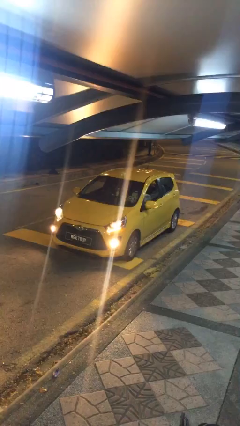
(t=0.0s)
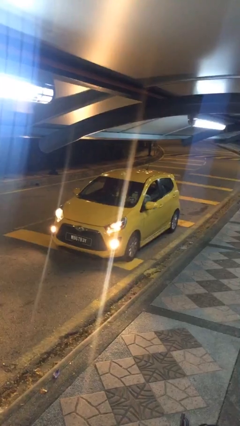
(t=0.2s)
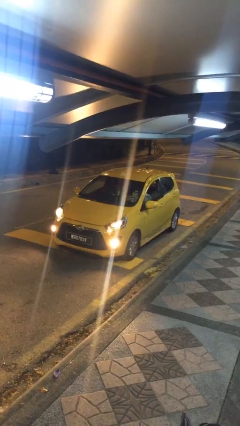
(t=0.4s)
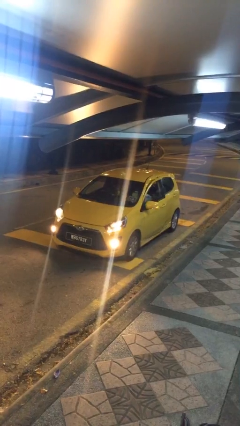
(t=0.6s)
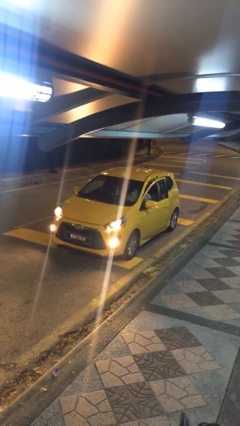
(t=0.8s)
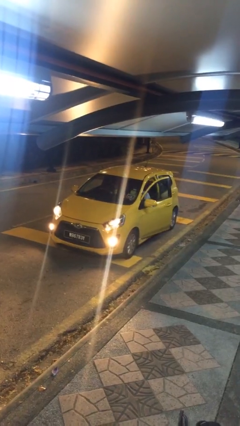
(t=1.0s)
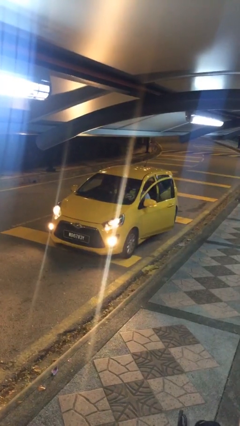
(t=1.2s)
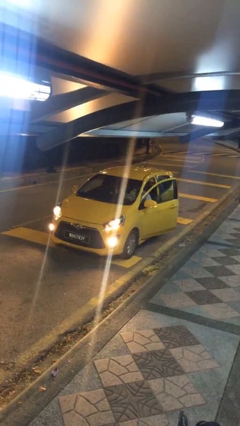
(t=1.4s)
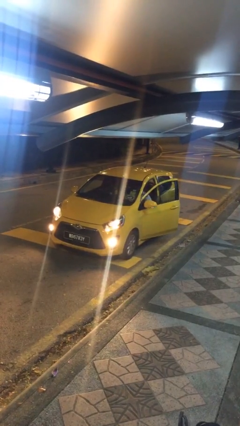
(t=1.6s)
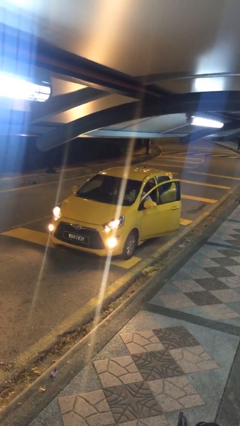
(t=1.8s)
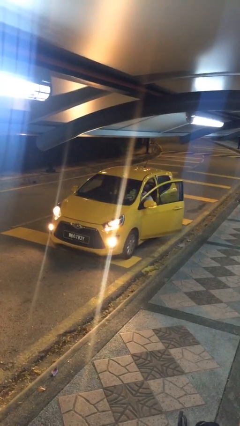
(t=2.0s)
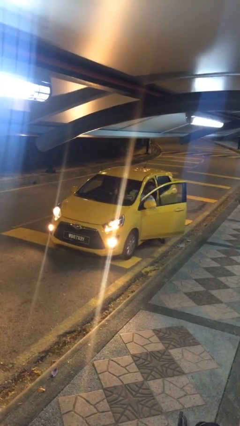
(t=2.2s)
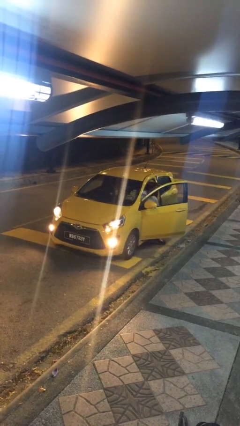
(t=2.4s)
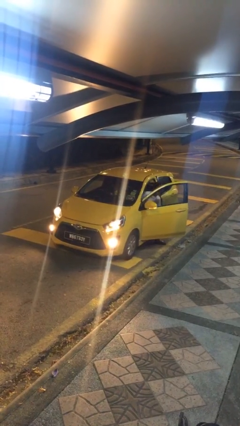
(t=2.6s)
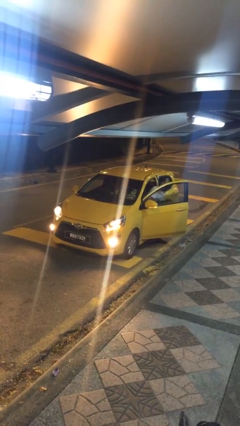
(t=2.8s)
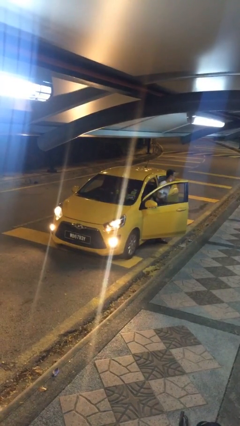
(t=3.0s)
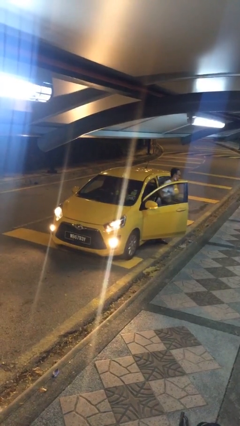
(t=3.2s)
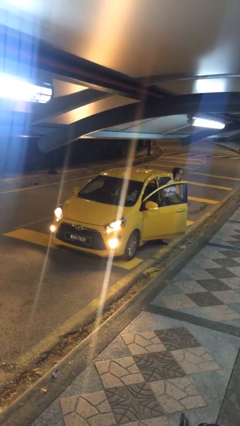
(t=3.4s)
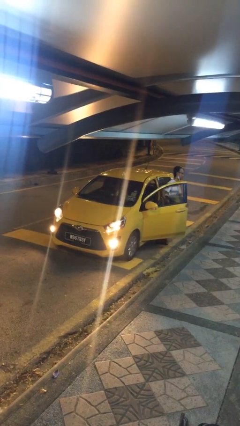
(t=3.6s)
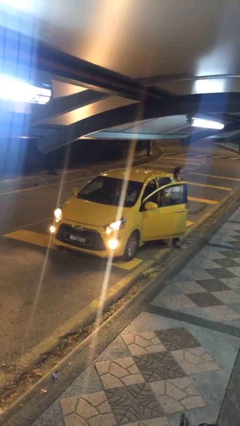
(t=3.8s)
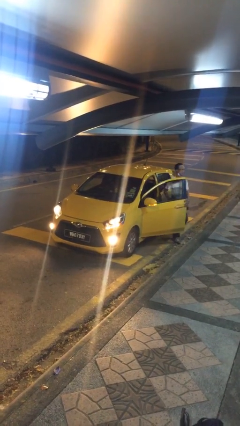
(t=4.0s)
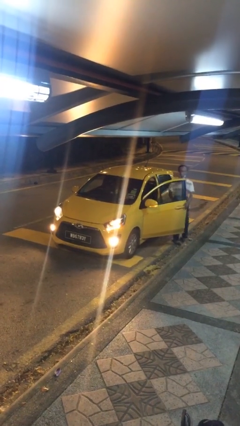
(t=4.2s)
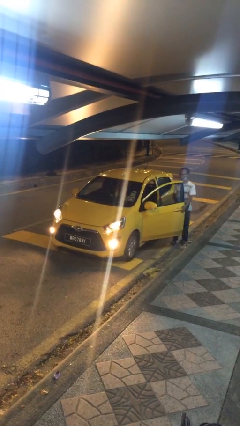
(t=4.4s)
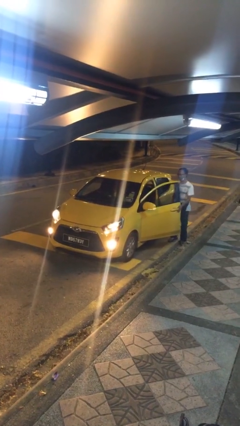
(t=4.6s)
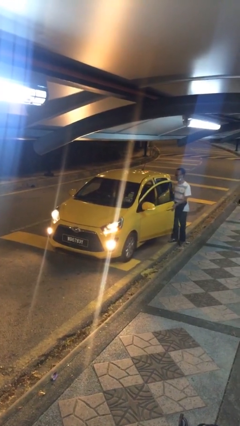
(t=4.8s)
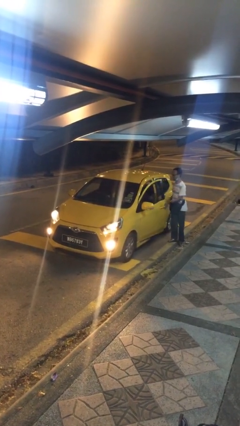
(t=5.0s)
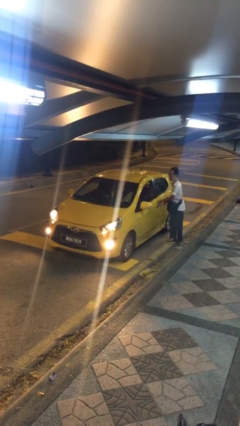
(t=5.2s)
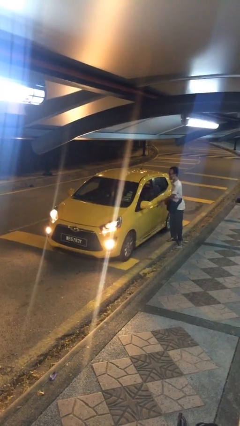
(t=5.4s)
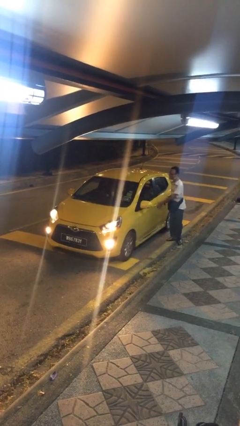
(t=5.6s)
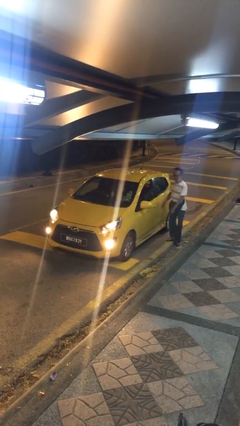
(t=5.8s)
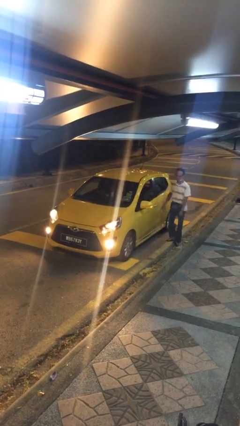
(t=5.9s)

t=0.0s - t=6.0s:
car drops off person

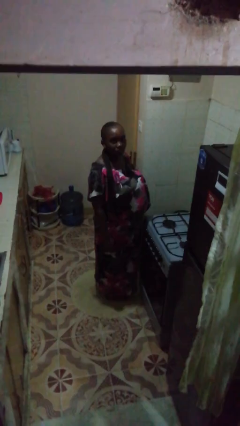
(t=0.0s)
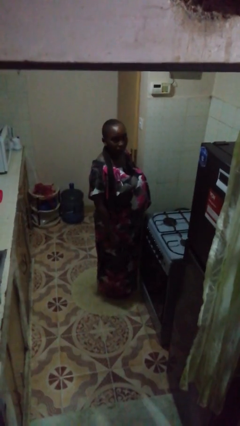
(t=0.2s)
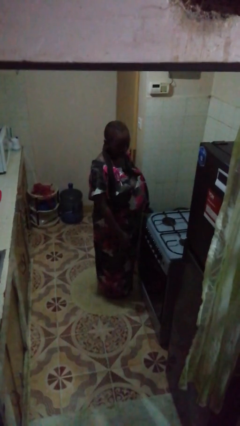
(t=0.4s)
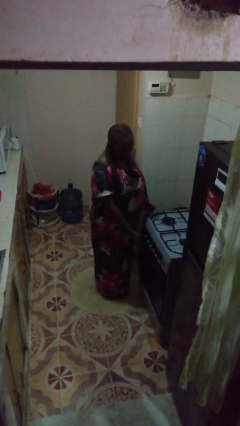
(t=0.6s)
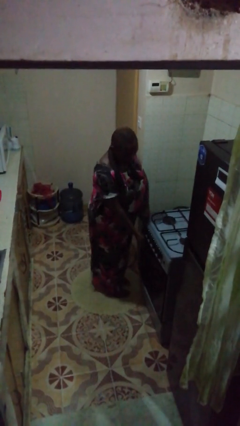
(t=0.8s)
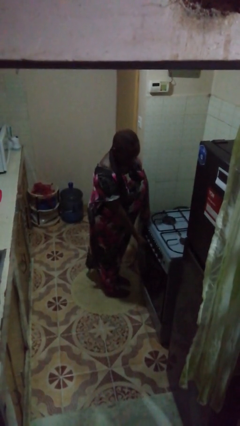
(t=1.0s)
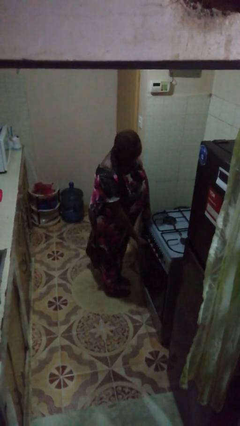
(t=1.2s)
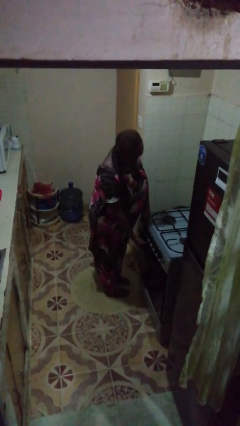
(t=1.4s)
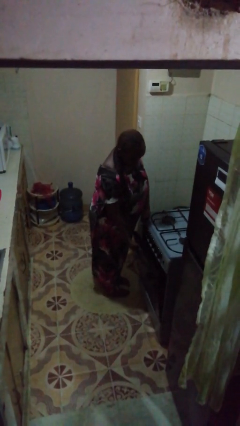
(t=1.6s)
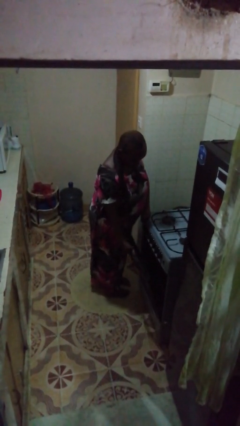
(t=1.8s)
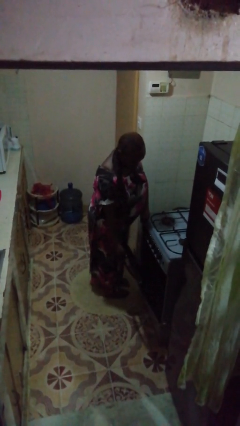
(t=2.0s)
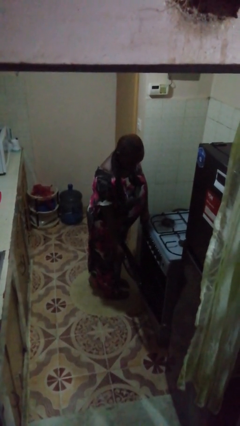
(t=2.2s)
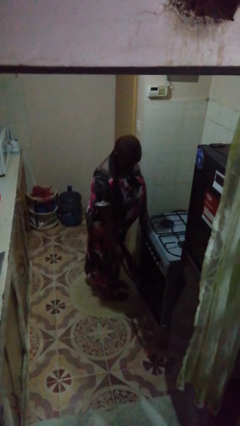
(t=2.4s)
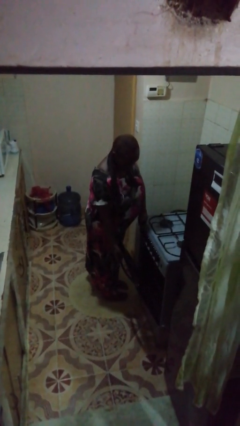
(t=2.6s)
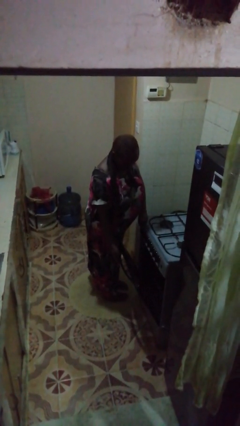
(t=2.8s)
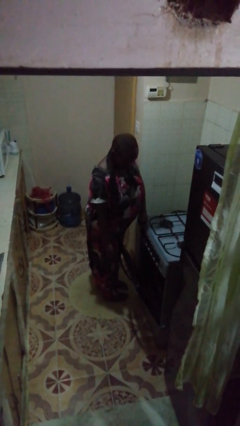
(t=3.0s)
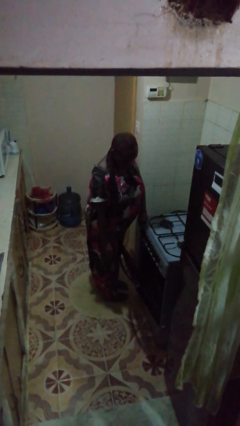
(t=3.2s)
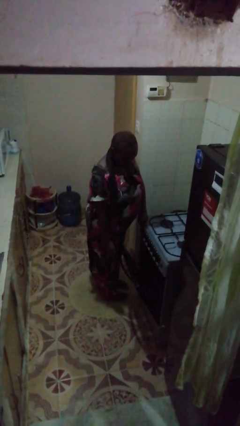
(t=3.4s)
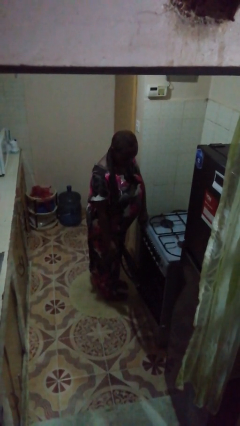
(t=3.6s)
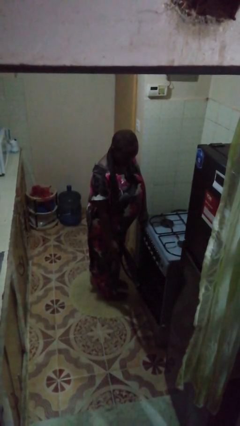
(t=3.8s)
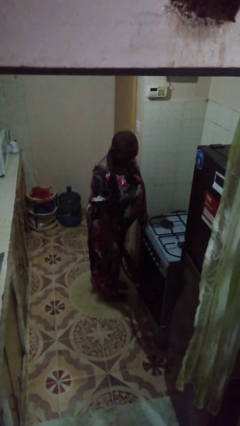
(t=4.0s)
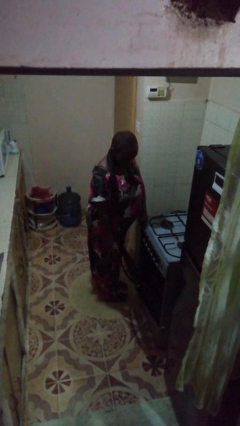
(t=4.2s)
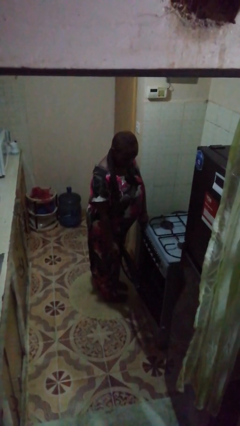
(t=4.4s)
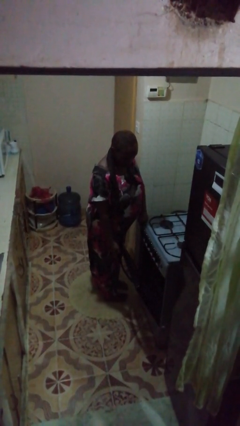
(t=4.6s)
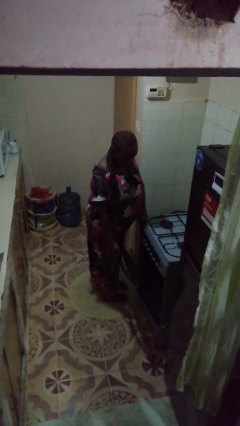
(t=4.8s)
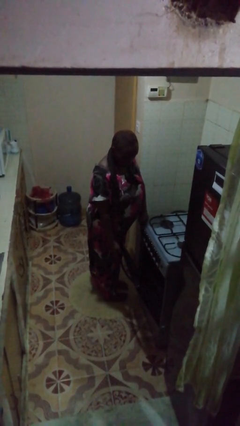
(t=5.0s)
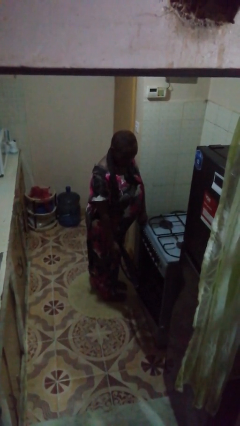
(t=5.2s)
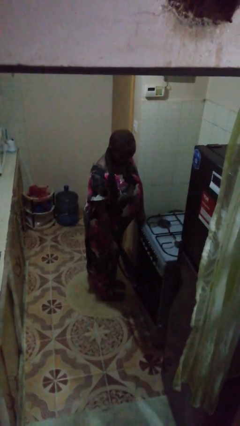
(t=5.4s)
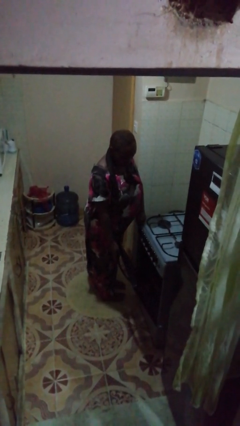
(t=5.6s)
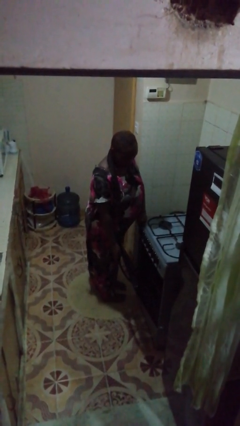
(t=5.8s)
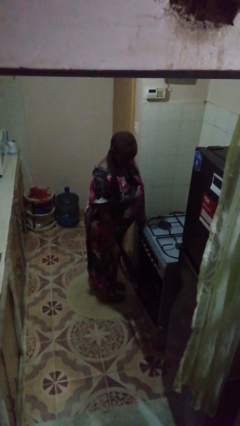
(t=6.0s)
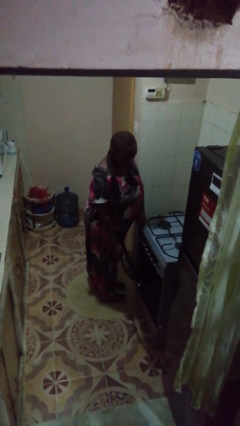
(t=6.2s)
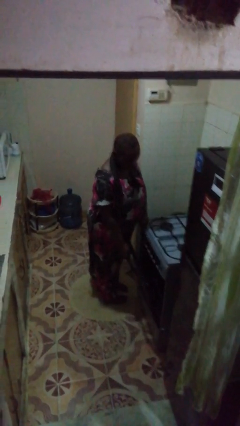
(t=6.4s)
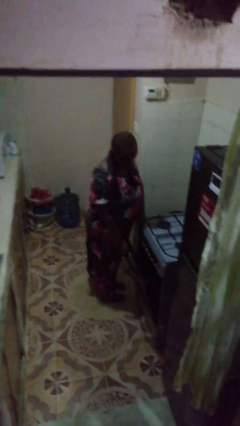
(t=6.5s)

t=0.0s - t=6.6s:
person opens oven door

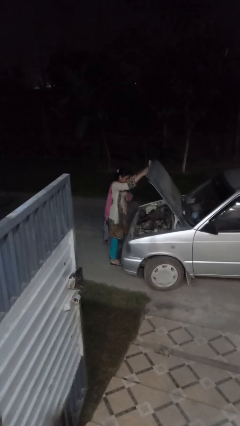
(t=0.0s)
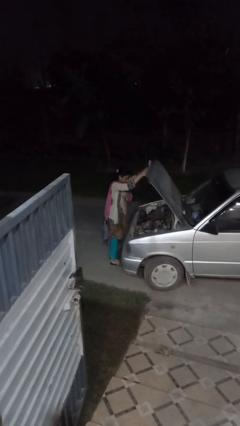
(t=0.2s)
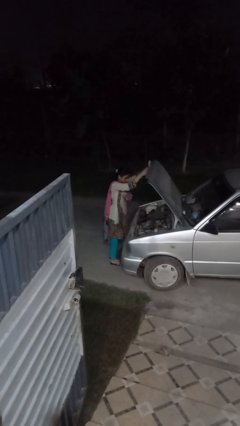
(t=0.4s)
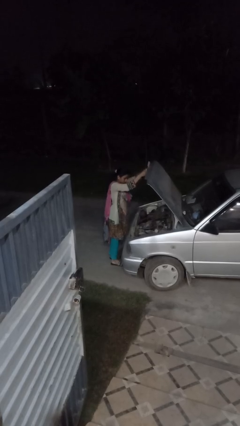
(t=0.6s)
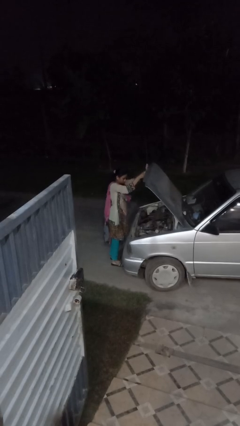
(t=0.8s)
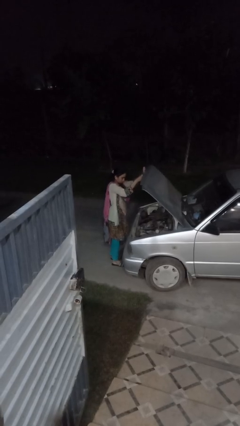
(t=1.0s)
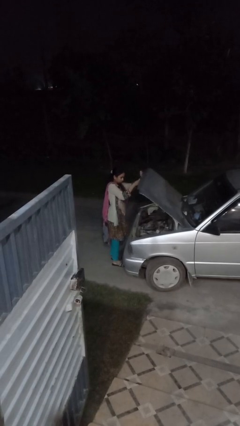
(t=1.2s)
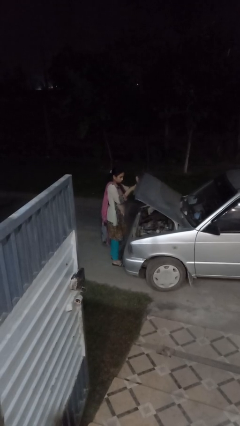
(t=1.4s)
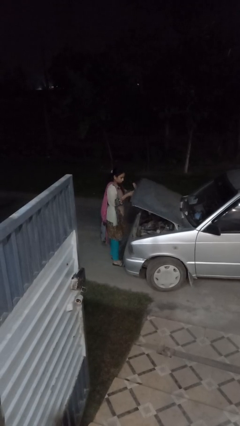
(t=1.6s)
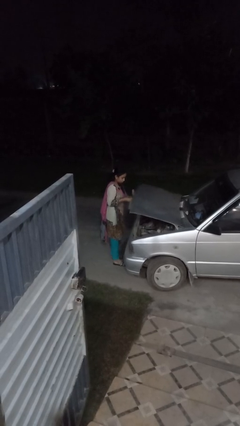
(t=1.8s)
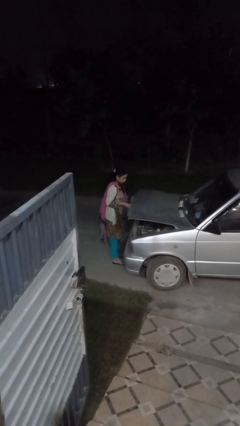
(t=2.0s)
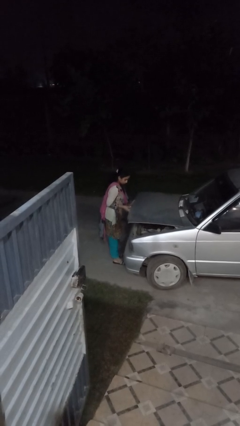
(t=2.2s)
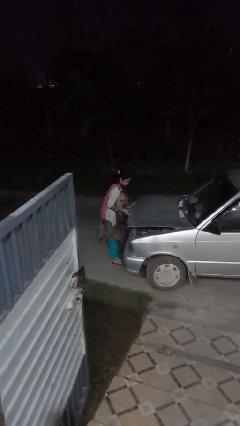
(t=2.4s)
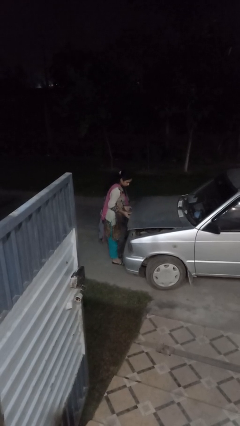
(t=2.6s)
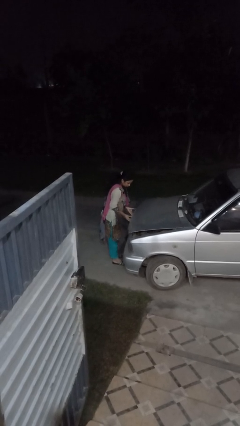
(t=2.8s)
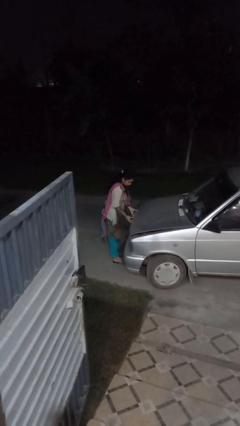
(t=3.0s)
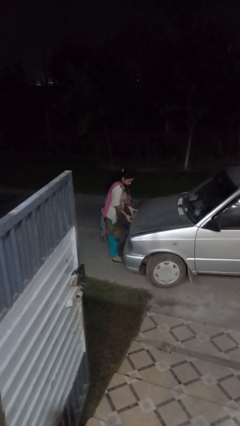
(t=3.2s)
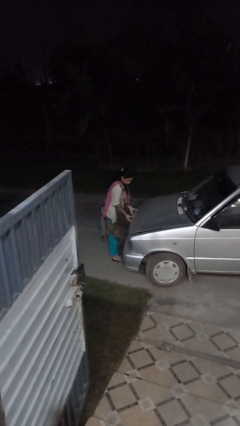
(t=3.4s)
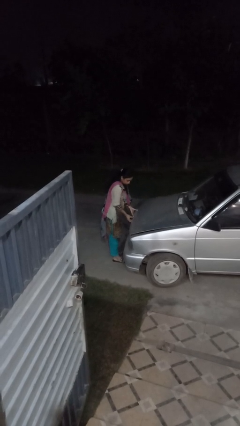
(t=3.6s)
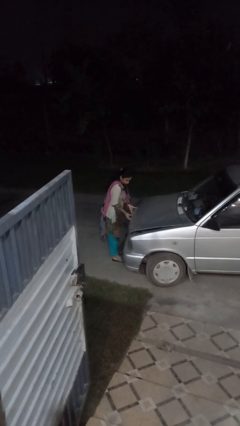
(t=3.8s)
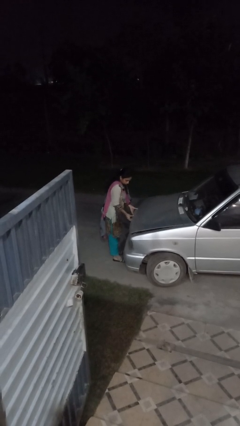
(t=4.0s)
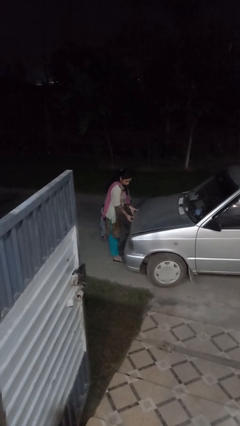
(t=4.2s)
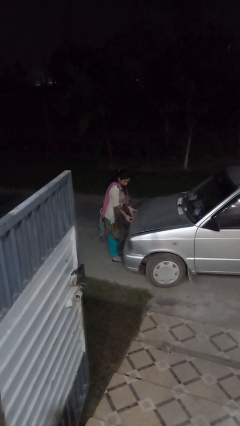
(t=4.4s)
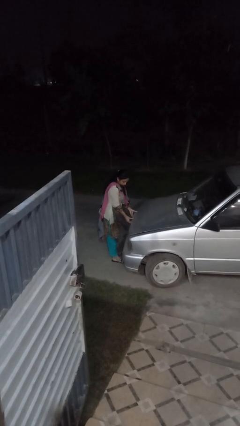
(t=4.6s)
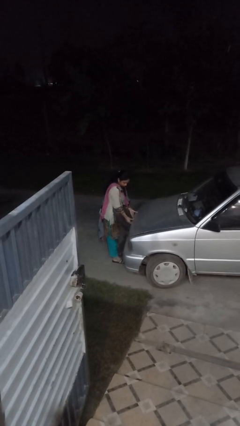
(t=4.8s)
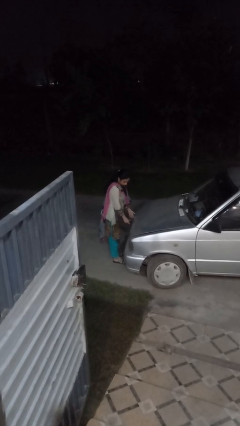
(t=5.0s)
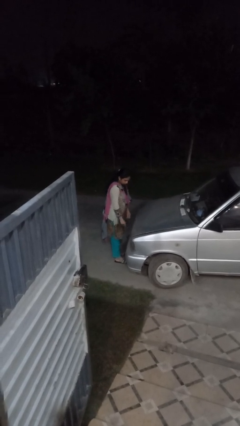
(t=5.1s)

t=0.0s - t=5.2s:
person closes car hood

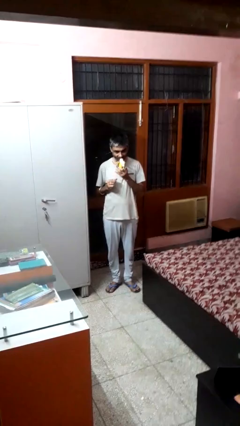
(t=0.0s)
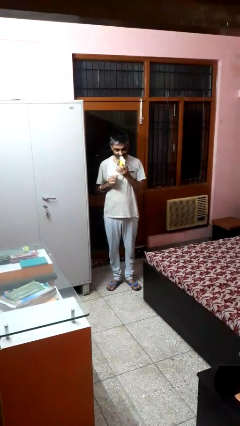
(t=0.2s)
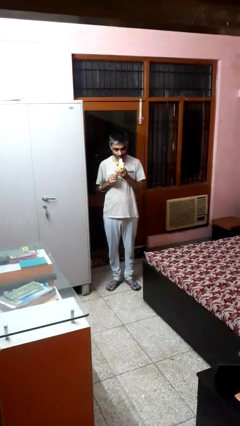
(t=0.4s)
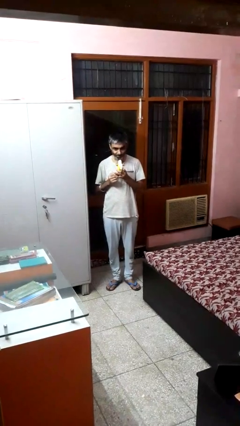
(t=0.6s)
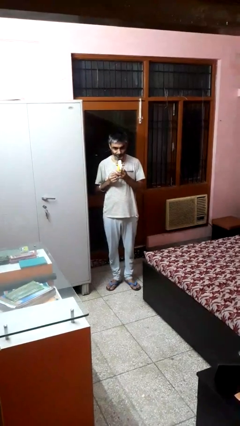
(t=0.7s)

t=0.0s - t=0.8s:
person eats banana
